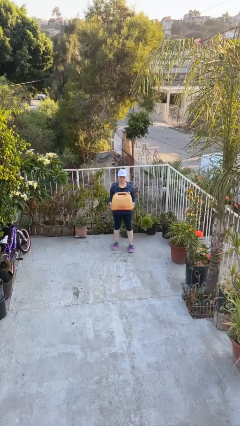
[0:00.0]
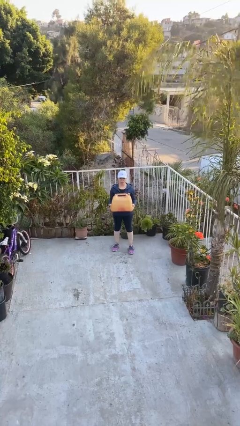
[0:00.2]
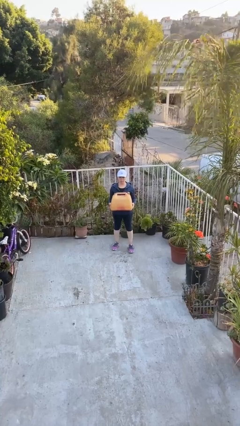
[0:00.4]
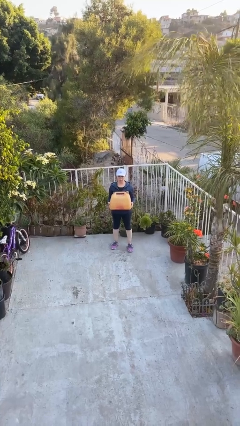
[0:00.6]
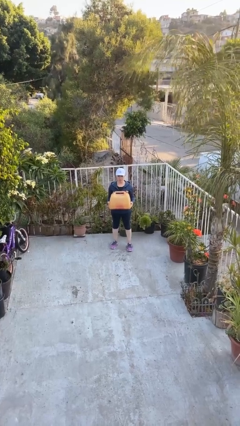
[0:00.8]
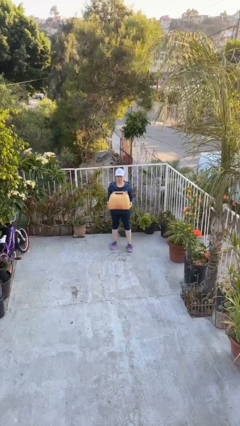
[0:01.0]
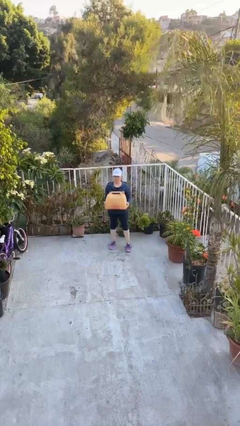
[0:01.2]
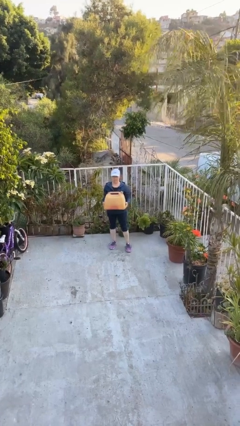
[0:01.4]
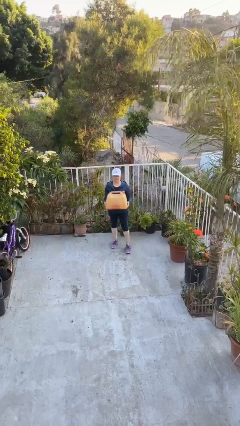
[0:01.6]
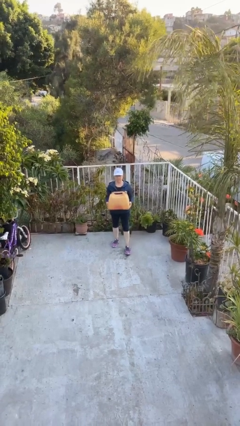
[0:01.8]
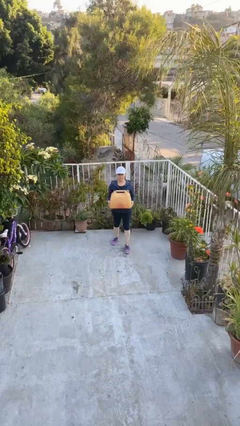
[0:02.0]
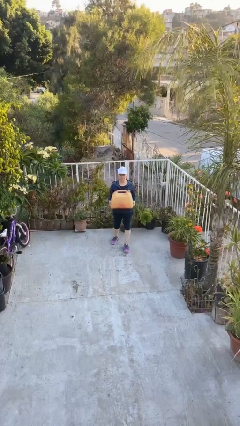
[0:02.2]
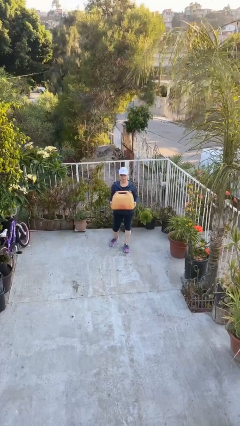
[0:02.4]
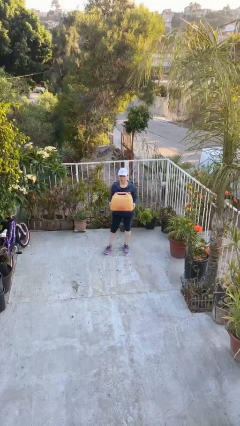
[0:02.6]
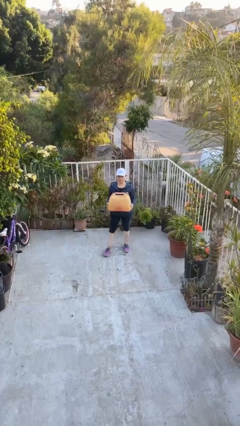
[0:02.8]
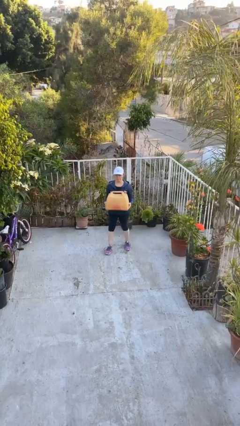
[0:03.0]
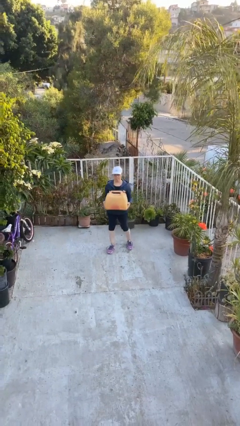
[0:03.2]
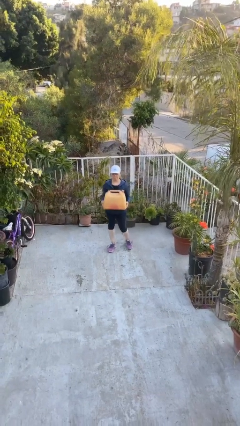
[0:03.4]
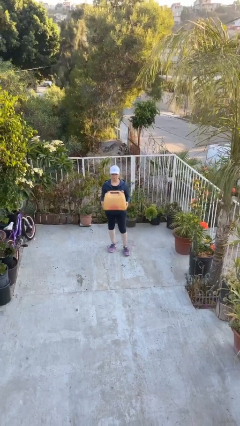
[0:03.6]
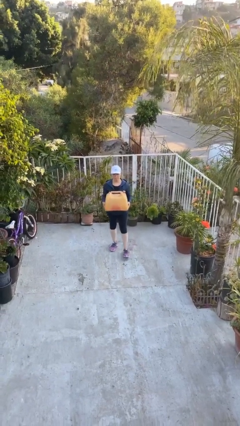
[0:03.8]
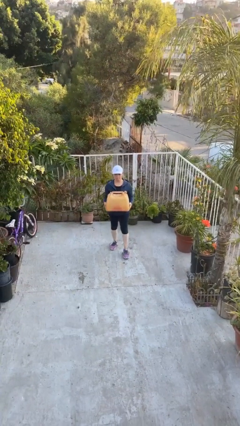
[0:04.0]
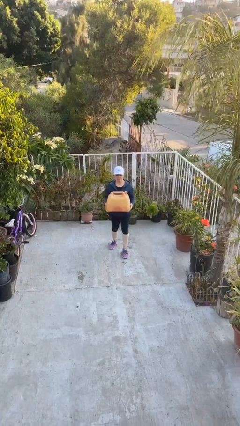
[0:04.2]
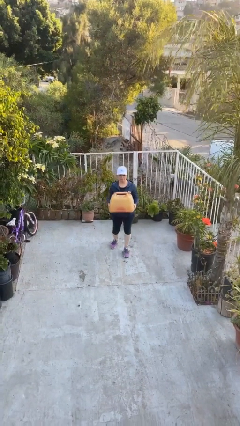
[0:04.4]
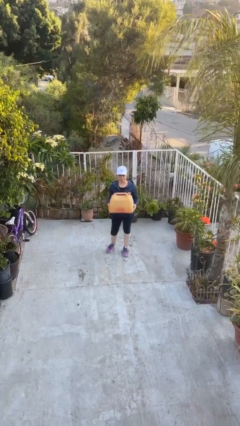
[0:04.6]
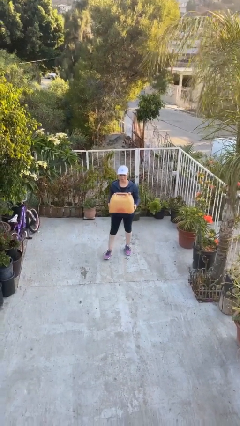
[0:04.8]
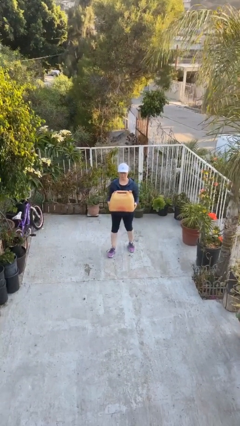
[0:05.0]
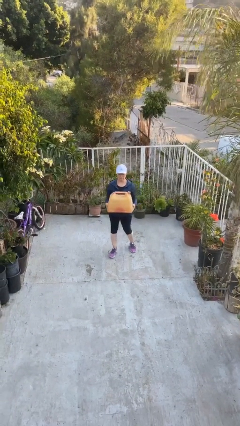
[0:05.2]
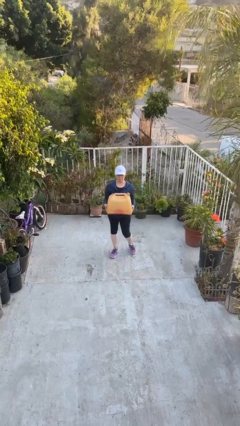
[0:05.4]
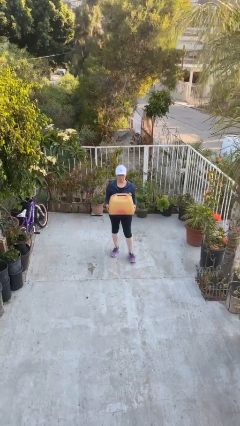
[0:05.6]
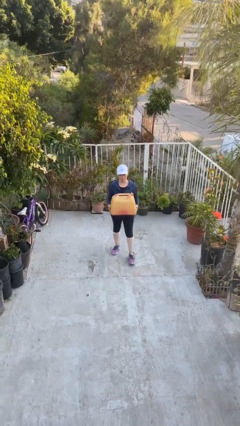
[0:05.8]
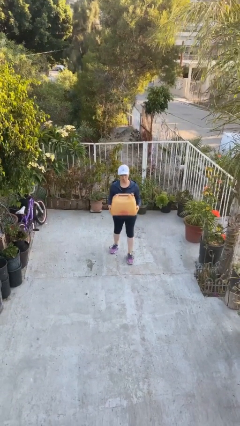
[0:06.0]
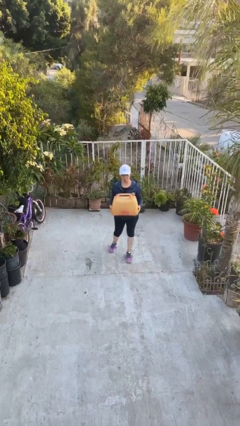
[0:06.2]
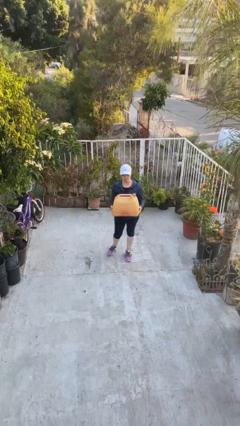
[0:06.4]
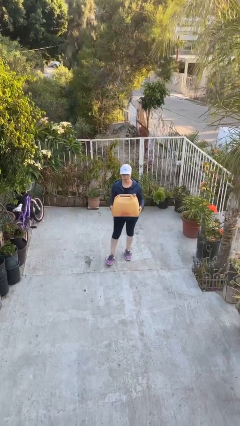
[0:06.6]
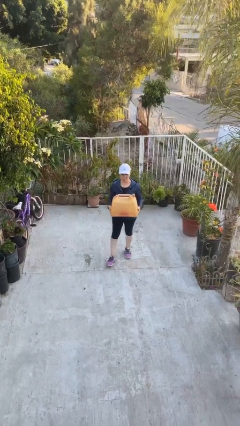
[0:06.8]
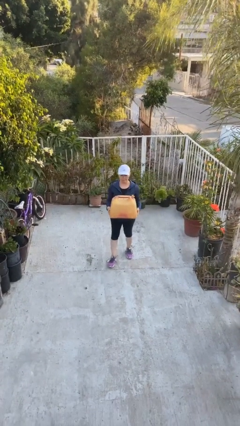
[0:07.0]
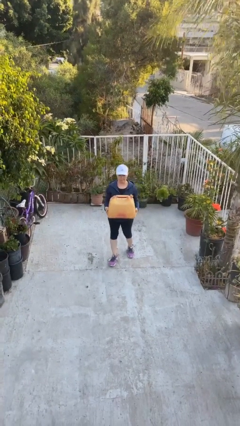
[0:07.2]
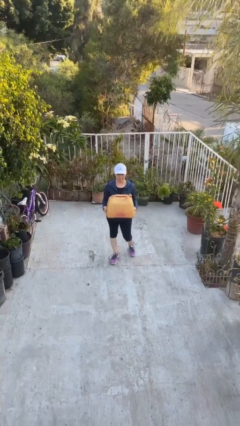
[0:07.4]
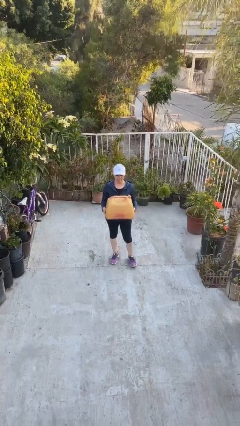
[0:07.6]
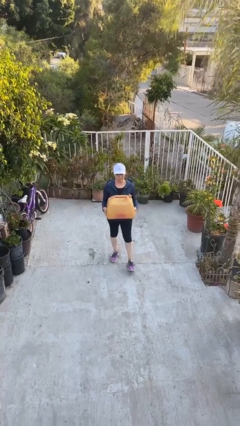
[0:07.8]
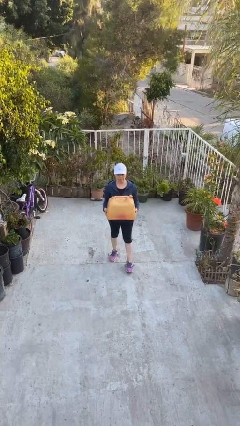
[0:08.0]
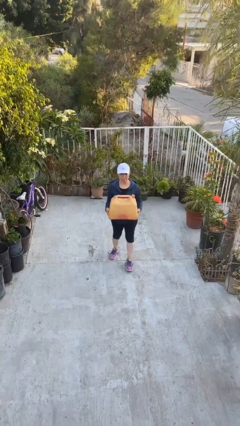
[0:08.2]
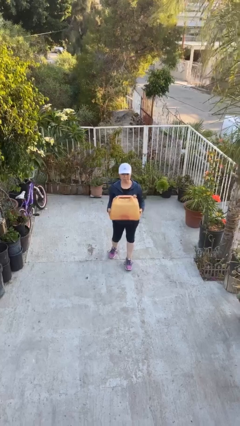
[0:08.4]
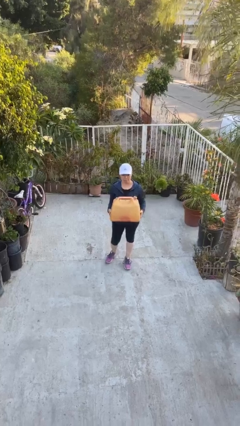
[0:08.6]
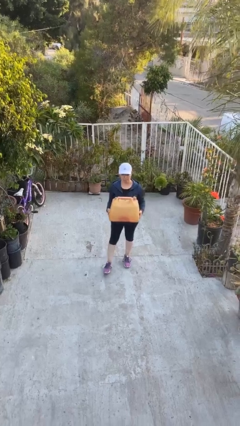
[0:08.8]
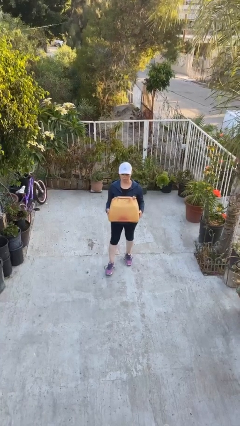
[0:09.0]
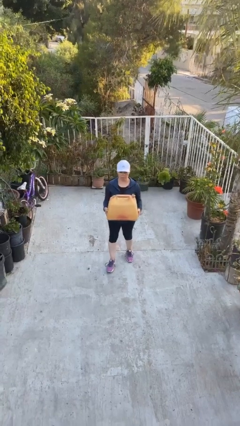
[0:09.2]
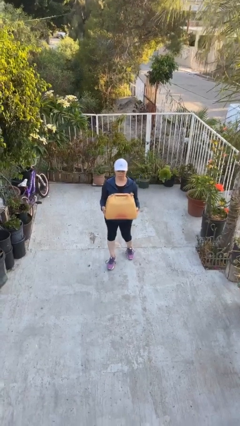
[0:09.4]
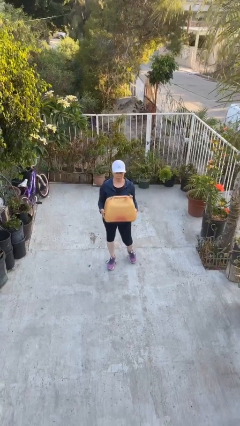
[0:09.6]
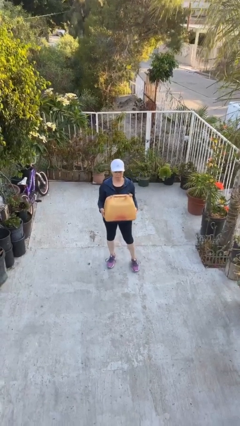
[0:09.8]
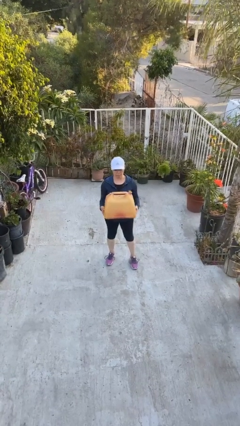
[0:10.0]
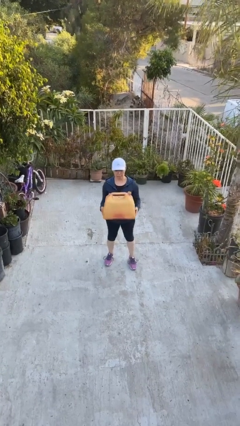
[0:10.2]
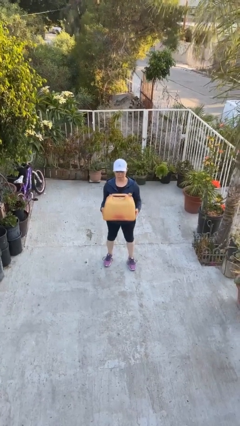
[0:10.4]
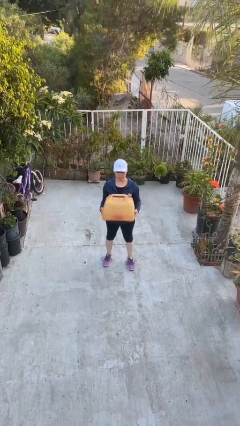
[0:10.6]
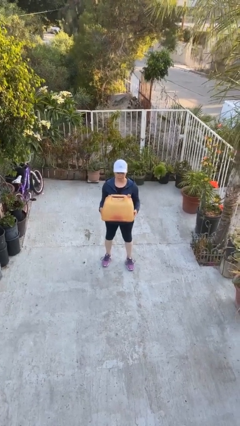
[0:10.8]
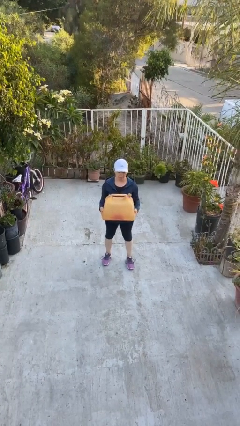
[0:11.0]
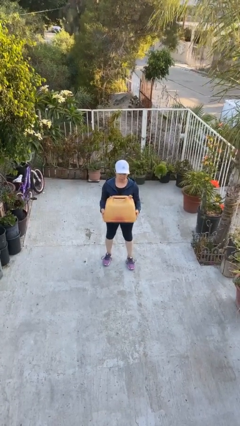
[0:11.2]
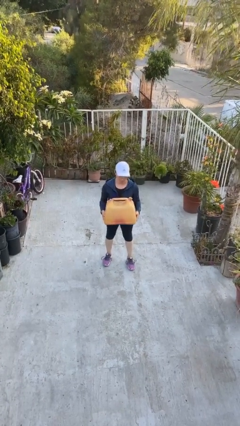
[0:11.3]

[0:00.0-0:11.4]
person carries heavy object

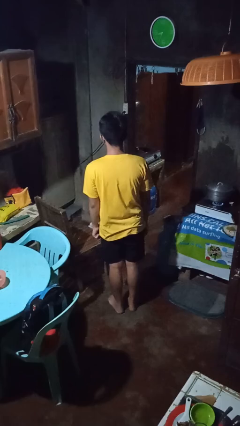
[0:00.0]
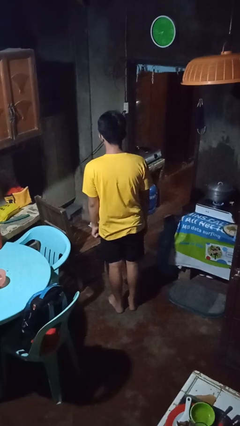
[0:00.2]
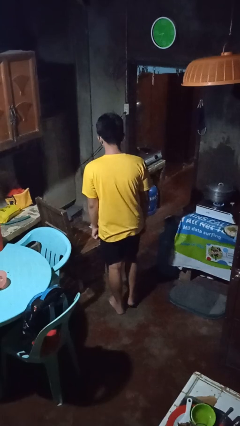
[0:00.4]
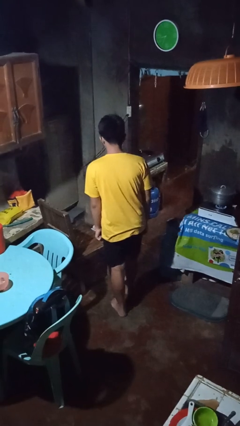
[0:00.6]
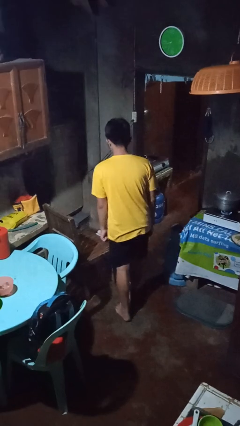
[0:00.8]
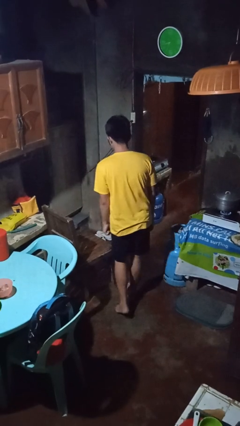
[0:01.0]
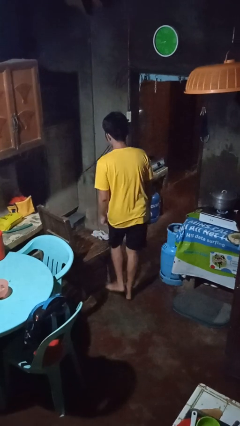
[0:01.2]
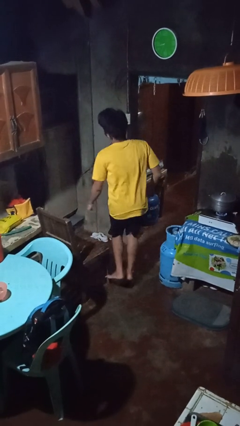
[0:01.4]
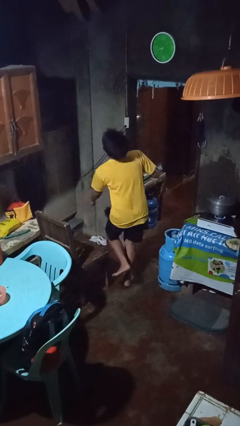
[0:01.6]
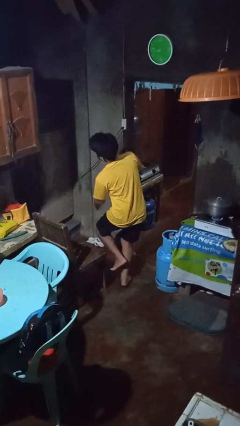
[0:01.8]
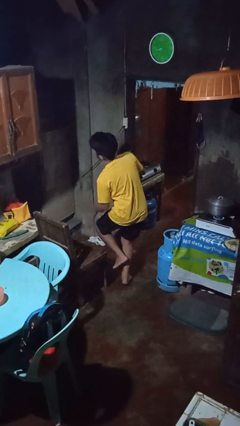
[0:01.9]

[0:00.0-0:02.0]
person trips on object on floor

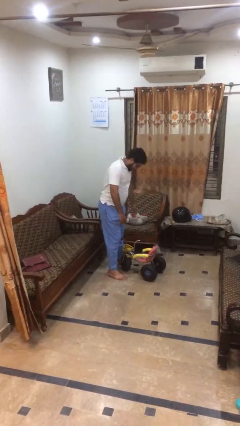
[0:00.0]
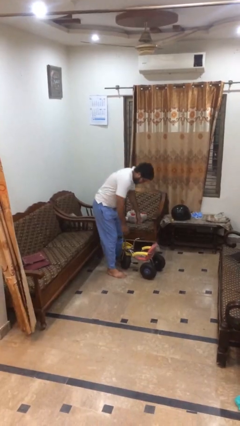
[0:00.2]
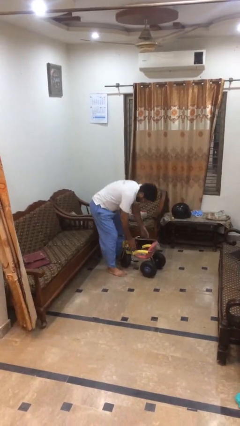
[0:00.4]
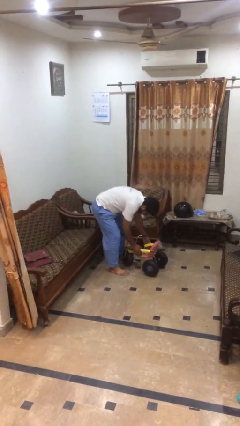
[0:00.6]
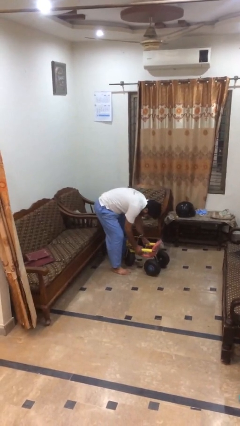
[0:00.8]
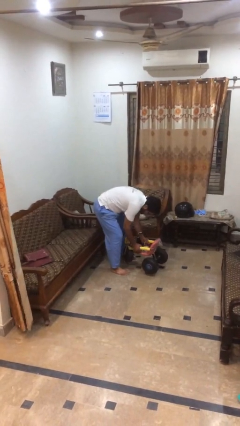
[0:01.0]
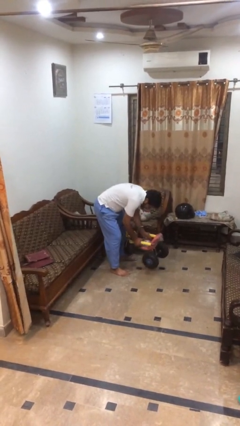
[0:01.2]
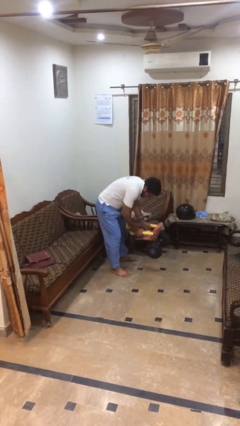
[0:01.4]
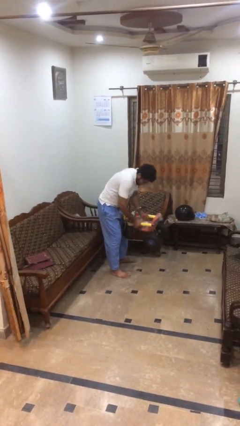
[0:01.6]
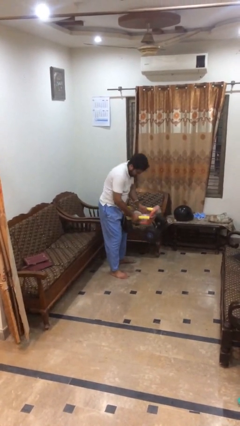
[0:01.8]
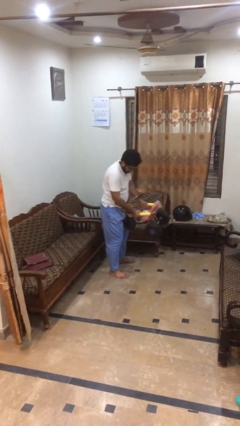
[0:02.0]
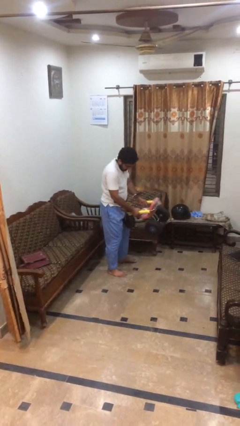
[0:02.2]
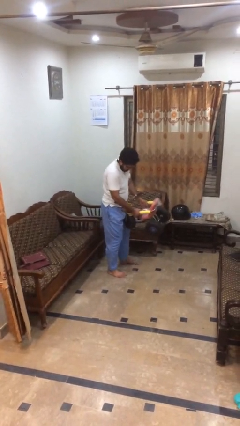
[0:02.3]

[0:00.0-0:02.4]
person picks up object from floor

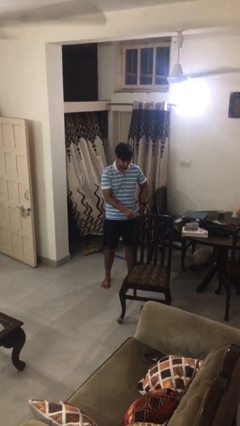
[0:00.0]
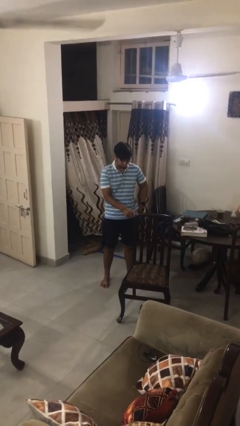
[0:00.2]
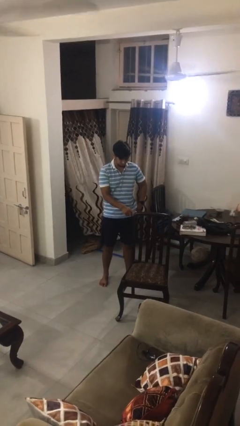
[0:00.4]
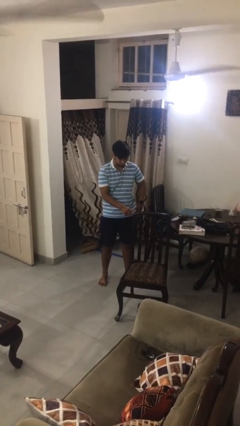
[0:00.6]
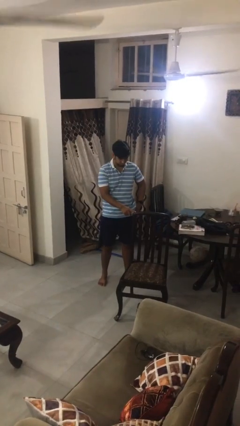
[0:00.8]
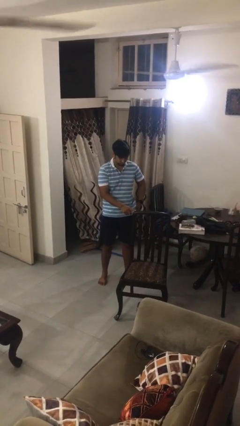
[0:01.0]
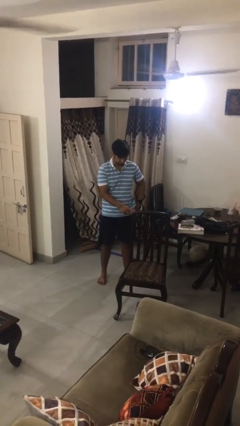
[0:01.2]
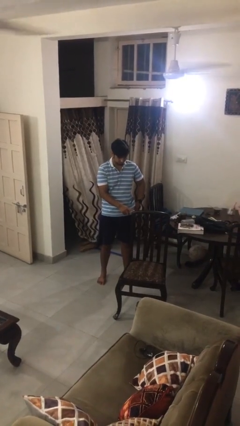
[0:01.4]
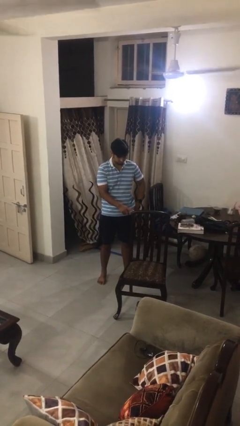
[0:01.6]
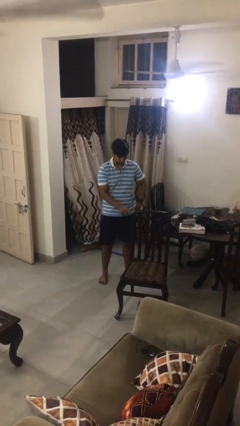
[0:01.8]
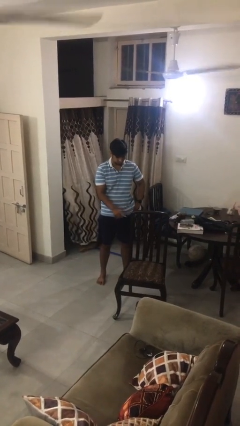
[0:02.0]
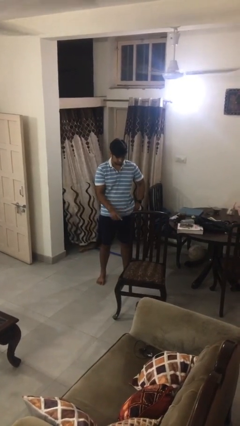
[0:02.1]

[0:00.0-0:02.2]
person taps object with finger
